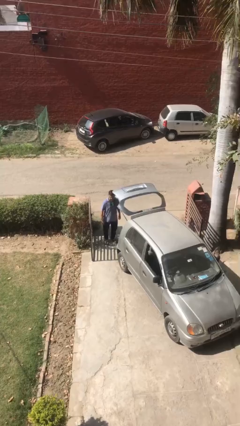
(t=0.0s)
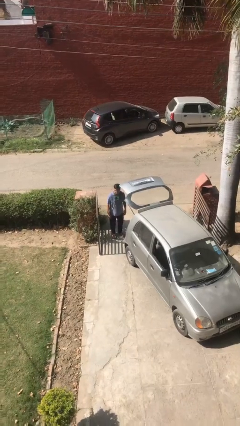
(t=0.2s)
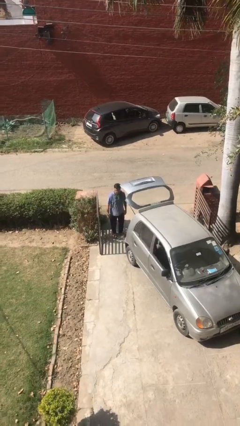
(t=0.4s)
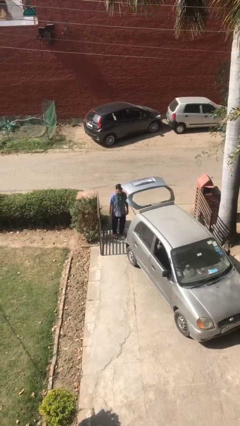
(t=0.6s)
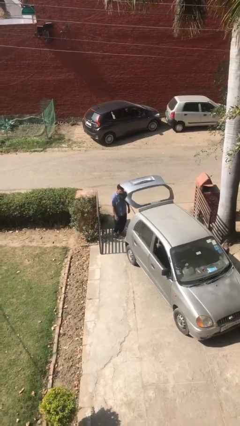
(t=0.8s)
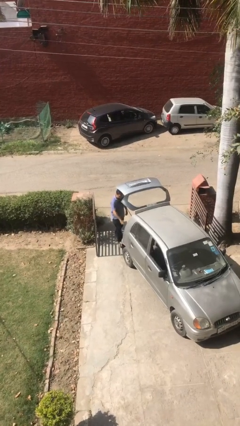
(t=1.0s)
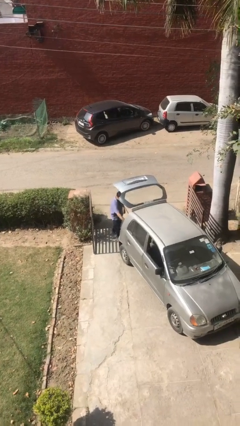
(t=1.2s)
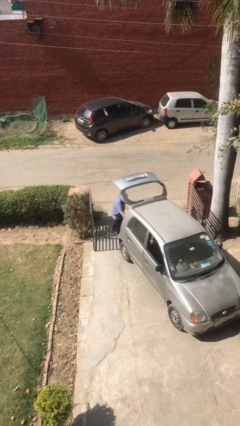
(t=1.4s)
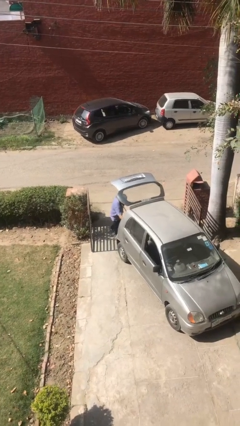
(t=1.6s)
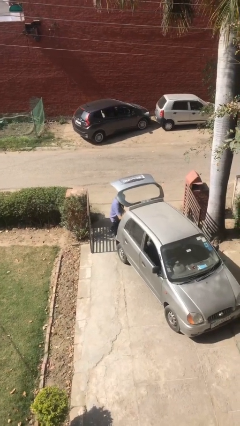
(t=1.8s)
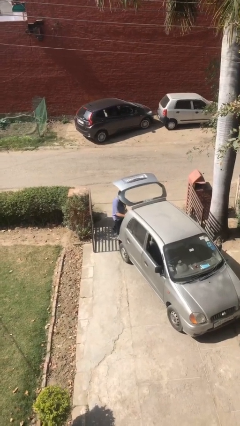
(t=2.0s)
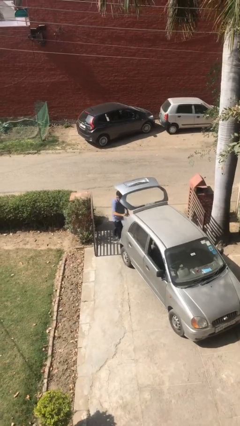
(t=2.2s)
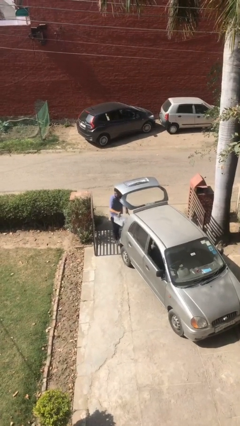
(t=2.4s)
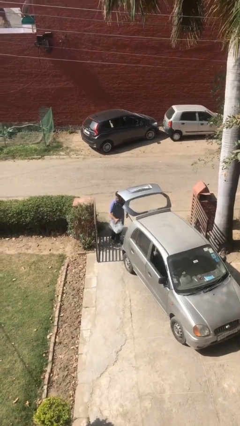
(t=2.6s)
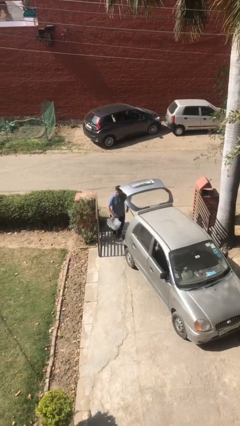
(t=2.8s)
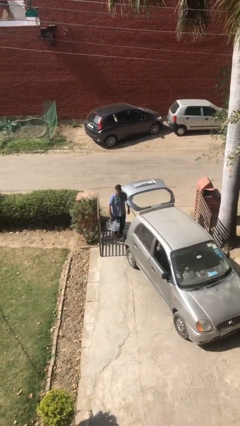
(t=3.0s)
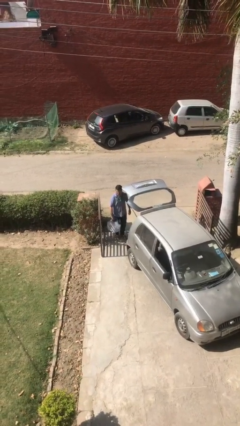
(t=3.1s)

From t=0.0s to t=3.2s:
person unloads car

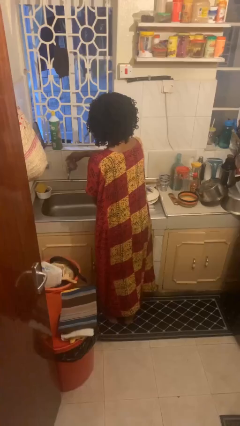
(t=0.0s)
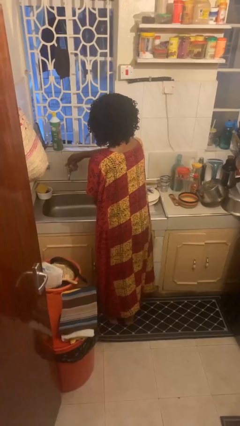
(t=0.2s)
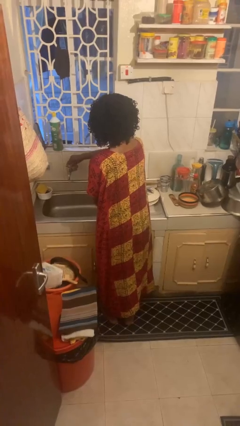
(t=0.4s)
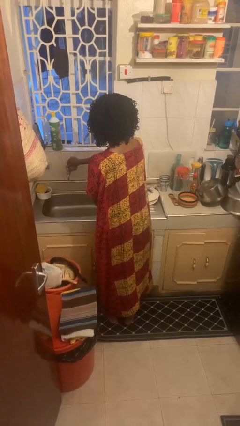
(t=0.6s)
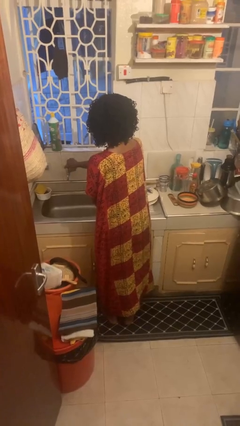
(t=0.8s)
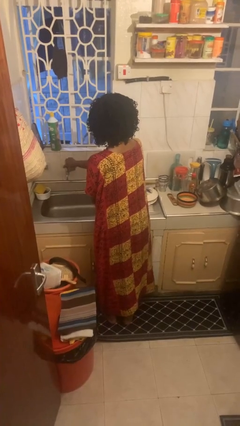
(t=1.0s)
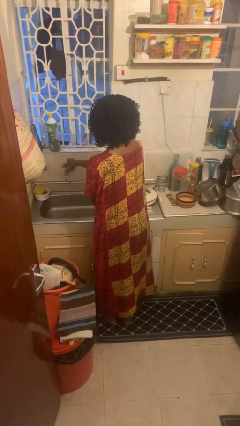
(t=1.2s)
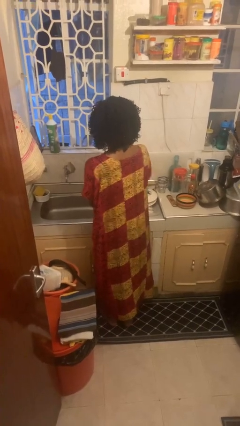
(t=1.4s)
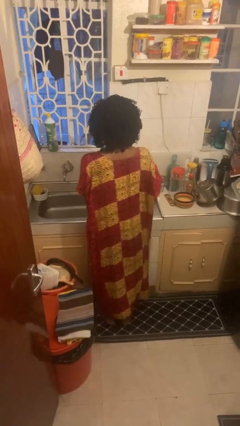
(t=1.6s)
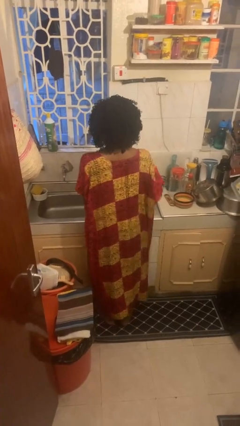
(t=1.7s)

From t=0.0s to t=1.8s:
person turns off faucet

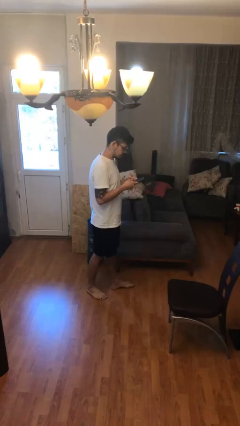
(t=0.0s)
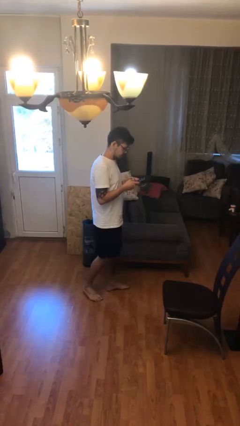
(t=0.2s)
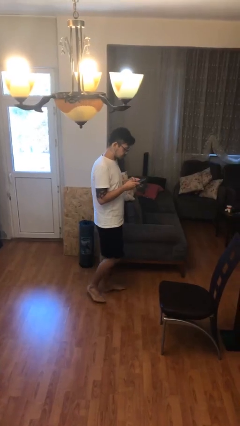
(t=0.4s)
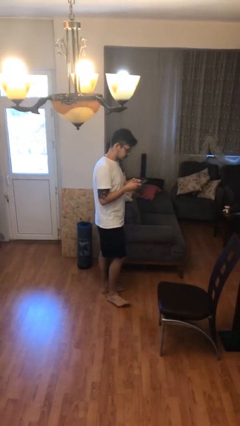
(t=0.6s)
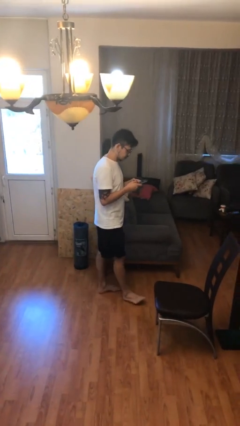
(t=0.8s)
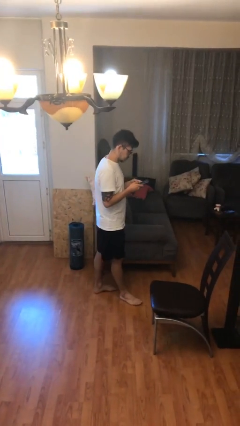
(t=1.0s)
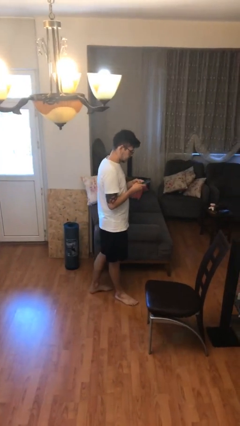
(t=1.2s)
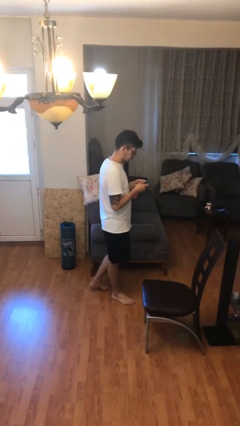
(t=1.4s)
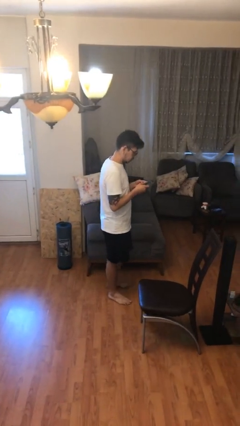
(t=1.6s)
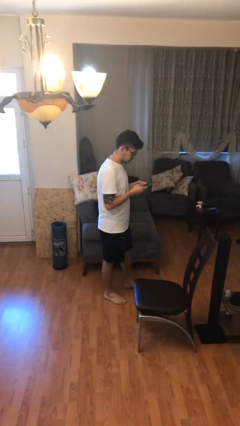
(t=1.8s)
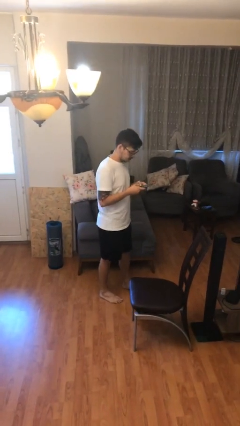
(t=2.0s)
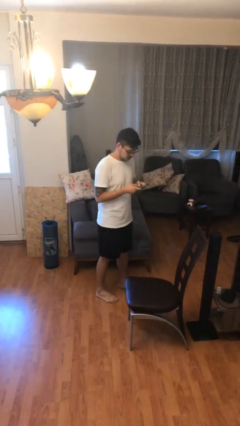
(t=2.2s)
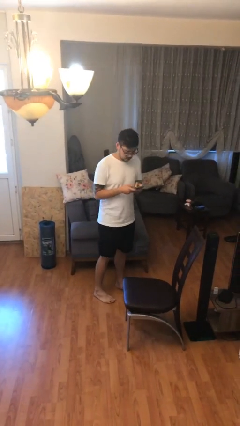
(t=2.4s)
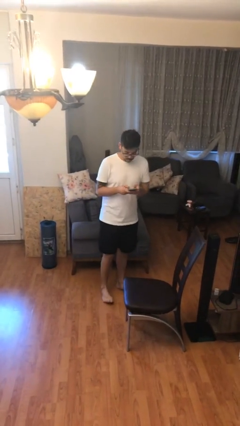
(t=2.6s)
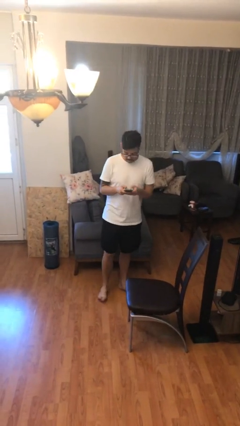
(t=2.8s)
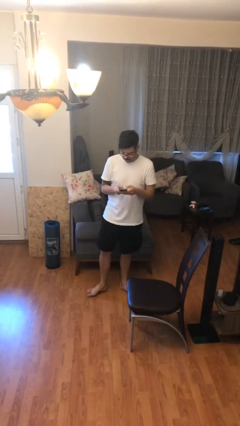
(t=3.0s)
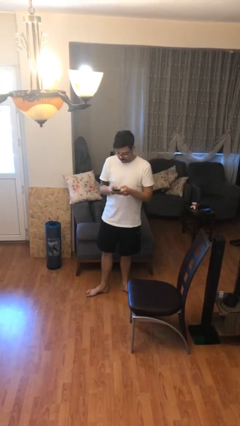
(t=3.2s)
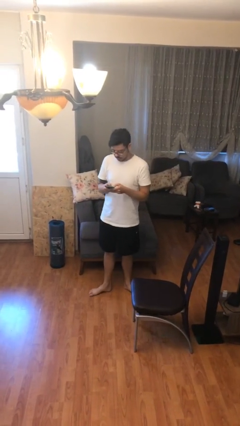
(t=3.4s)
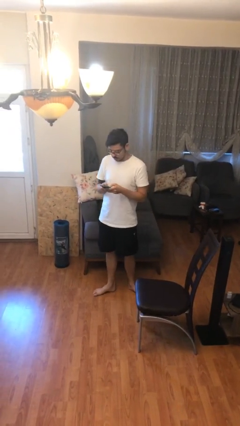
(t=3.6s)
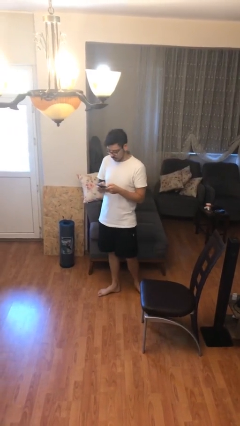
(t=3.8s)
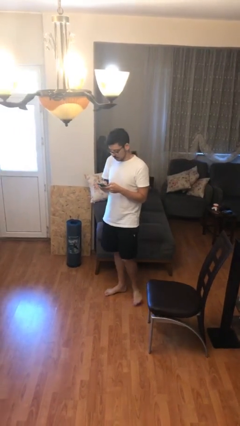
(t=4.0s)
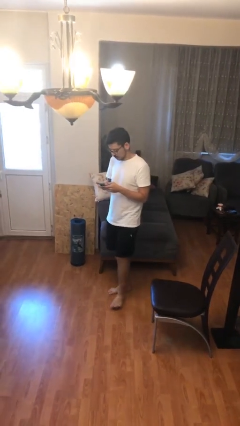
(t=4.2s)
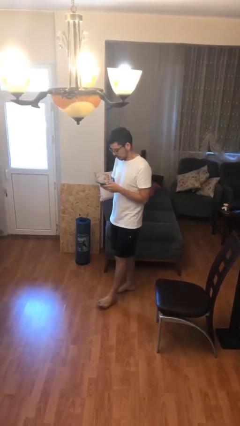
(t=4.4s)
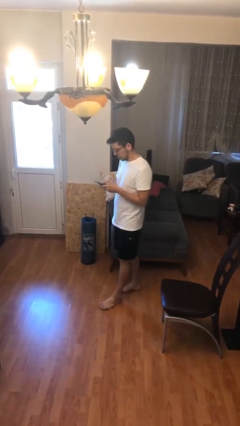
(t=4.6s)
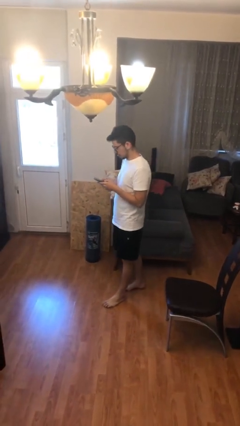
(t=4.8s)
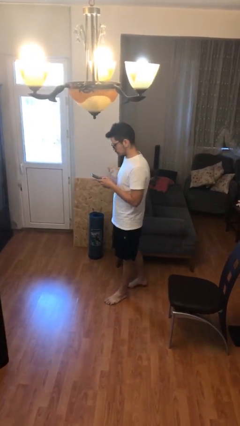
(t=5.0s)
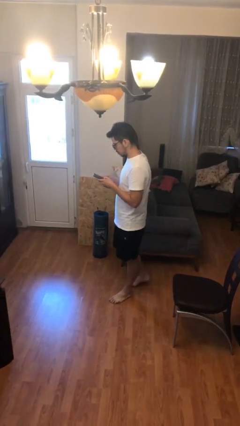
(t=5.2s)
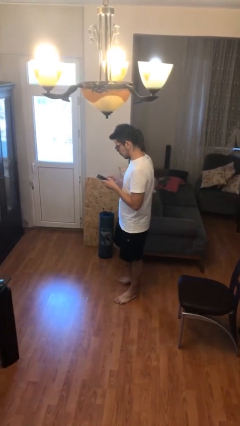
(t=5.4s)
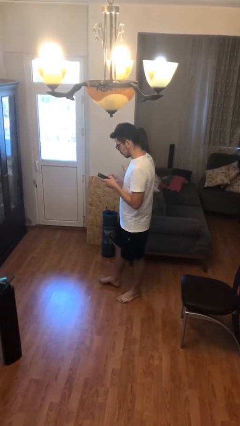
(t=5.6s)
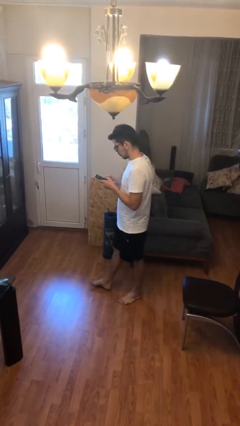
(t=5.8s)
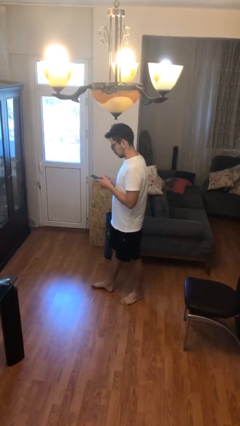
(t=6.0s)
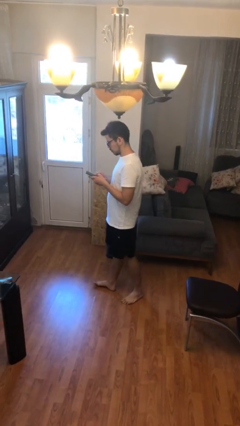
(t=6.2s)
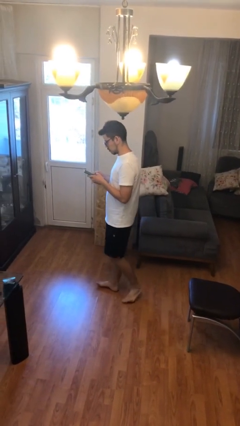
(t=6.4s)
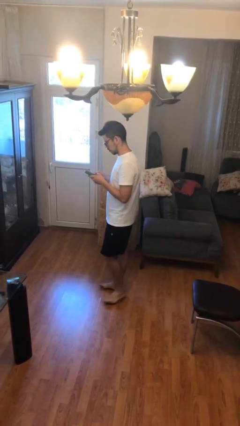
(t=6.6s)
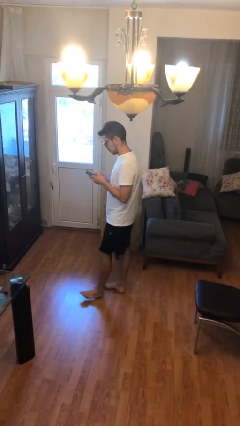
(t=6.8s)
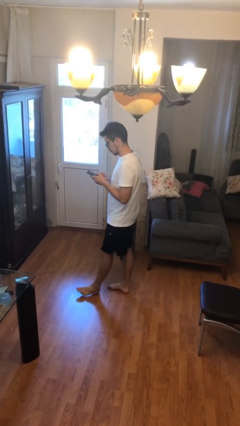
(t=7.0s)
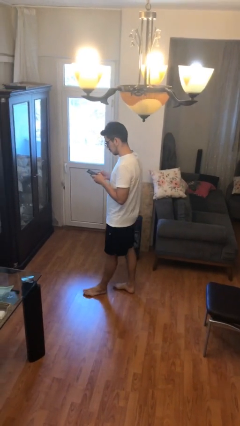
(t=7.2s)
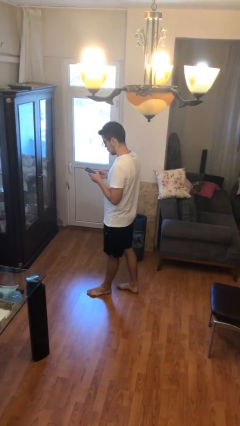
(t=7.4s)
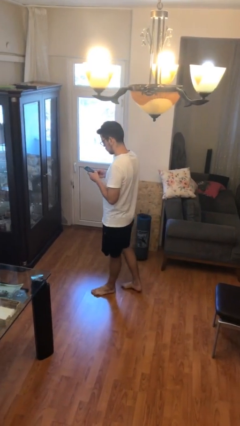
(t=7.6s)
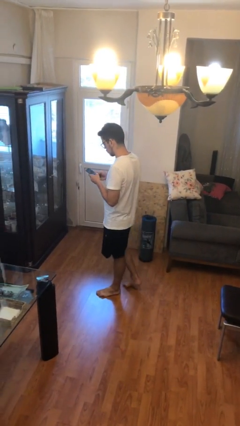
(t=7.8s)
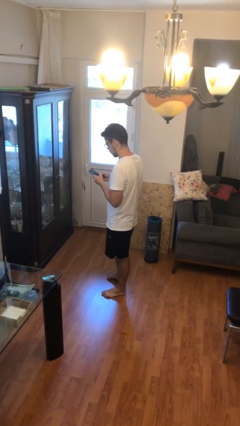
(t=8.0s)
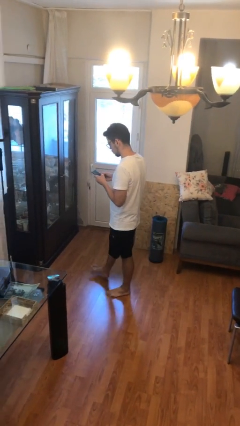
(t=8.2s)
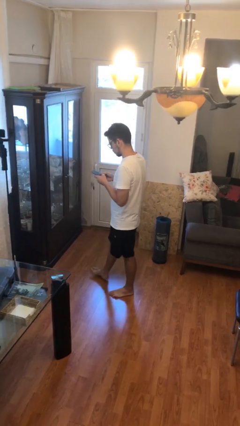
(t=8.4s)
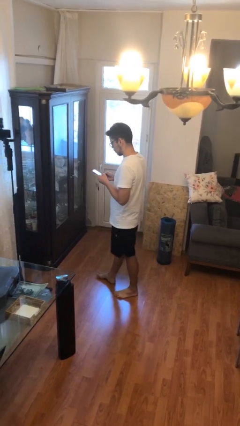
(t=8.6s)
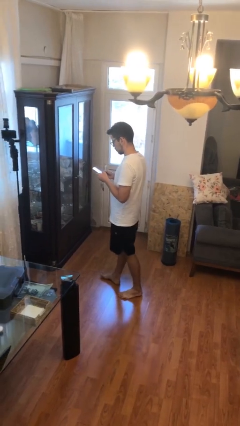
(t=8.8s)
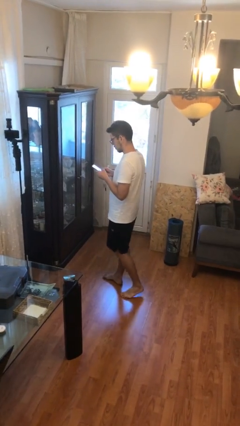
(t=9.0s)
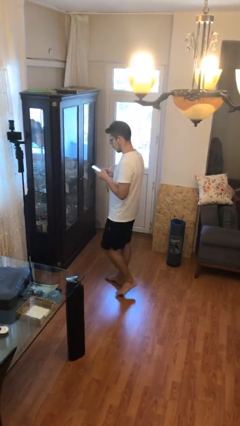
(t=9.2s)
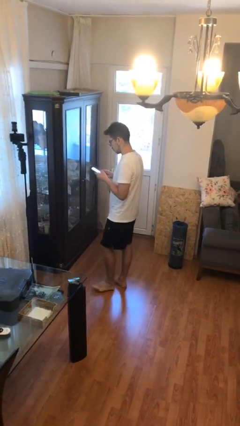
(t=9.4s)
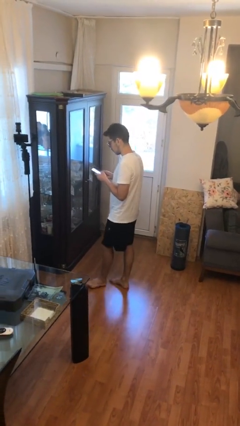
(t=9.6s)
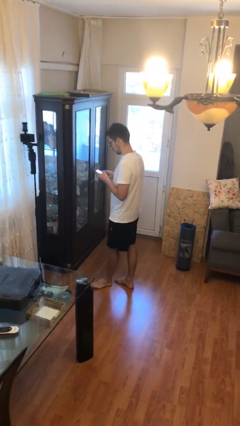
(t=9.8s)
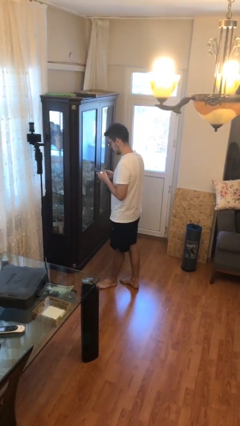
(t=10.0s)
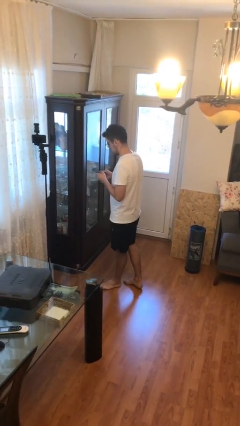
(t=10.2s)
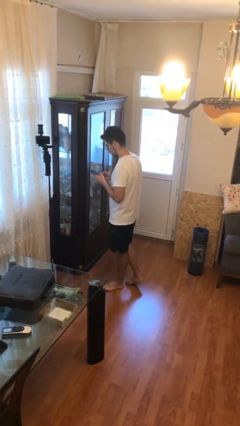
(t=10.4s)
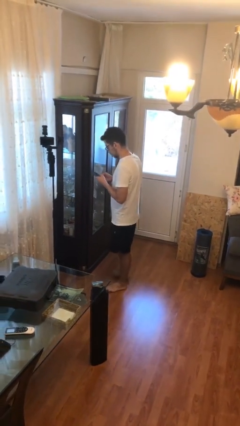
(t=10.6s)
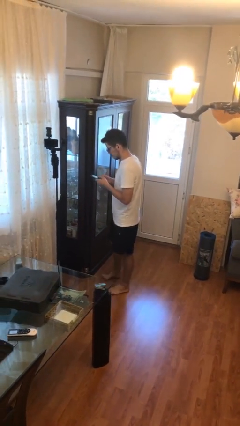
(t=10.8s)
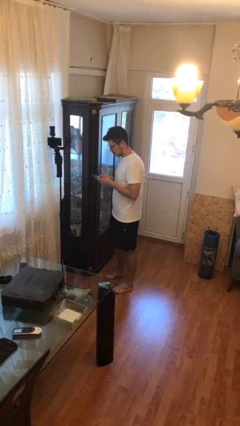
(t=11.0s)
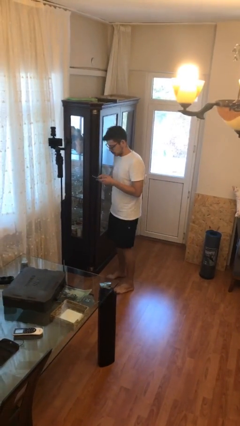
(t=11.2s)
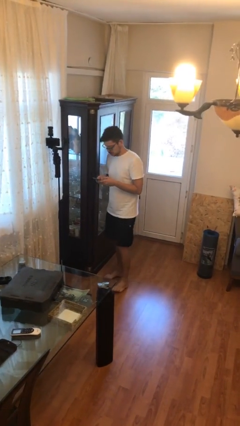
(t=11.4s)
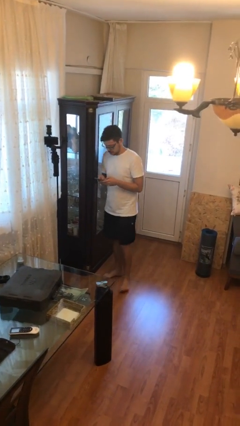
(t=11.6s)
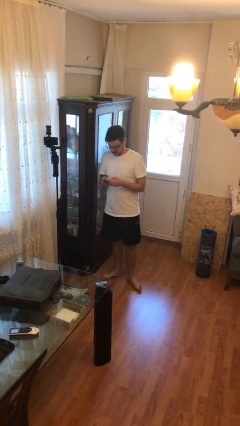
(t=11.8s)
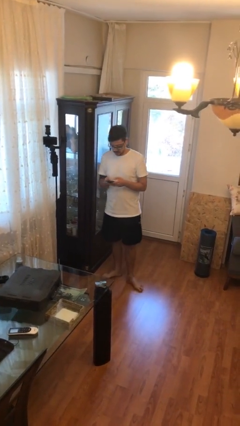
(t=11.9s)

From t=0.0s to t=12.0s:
person texts on phone

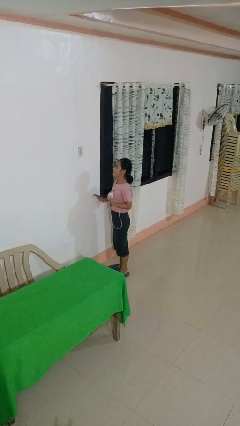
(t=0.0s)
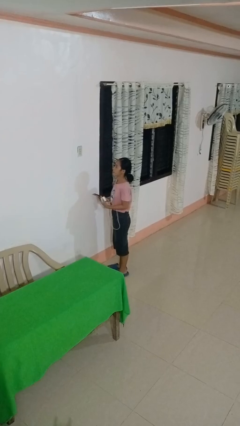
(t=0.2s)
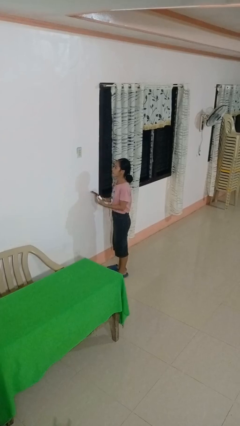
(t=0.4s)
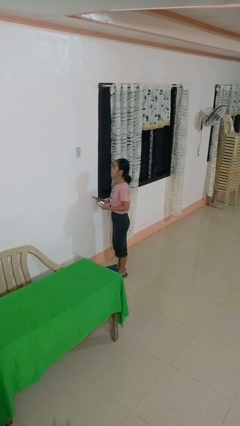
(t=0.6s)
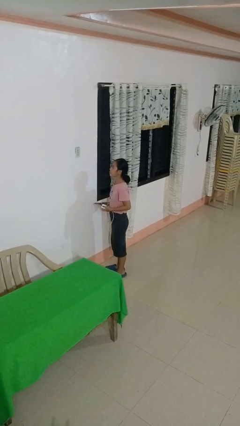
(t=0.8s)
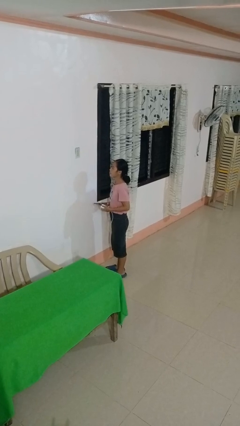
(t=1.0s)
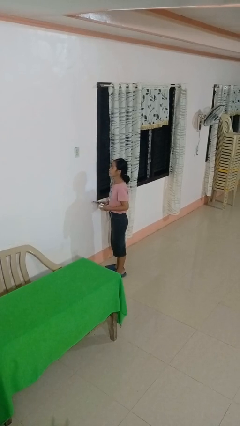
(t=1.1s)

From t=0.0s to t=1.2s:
person unplugs from electrical socket
